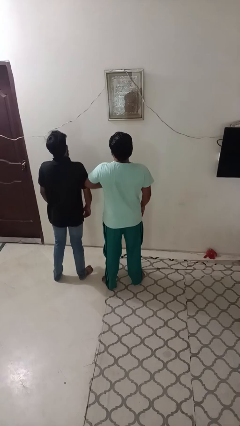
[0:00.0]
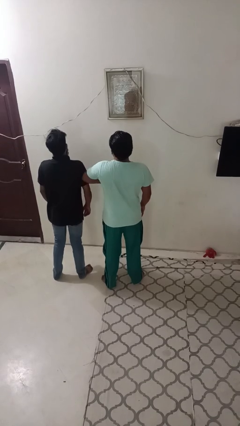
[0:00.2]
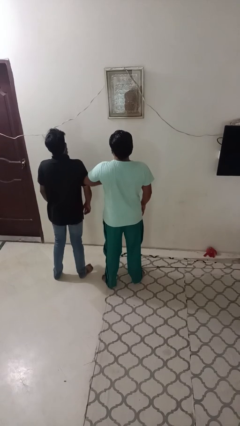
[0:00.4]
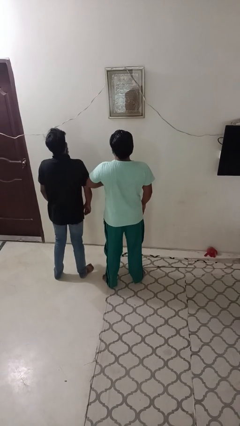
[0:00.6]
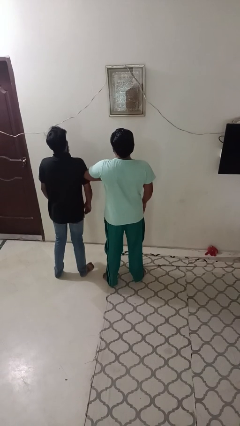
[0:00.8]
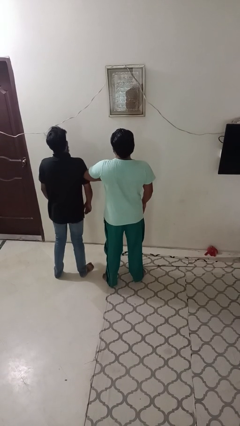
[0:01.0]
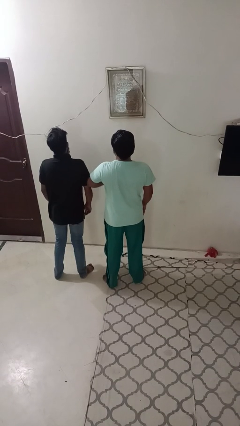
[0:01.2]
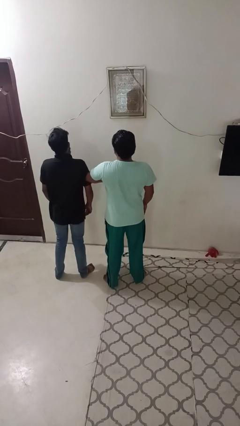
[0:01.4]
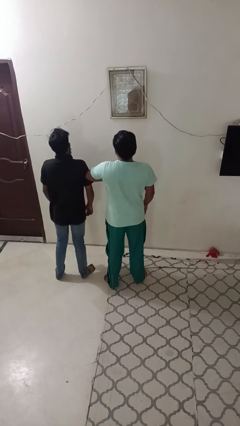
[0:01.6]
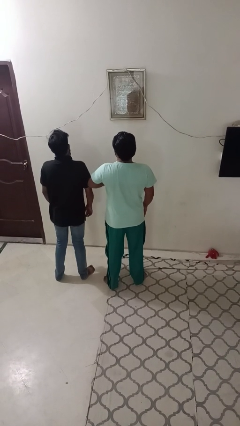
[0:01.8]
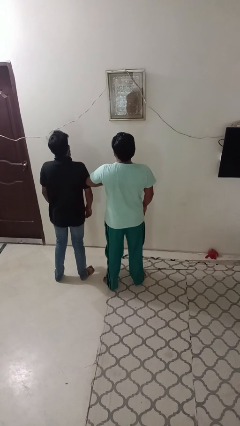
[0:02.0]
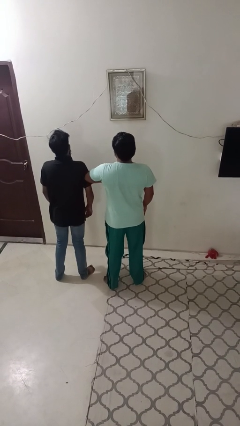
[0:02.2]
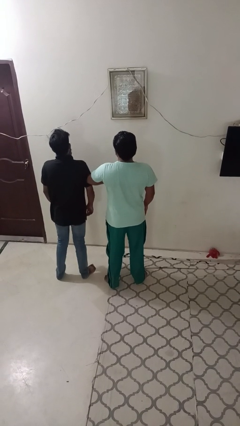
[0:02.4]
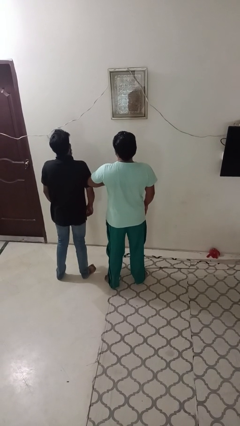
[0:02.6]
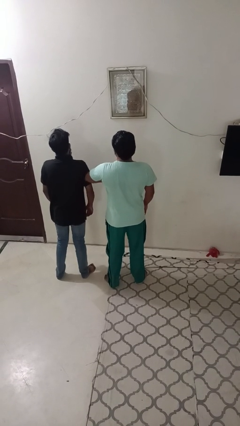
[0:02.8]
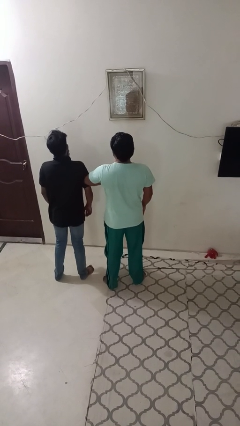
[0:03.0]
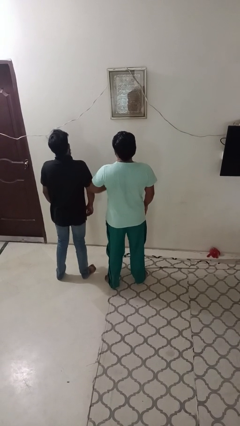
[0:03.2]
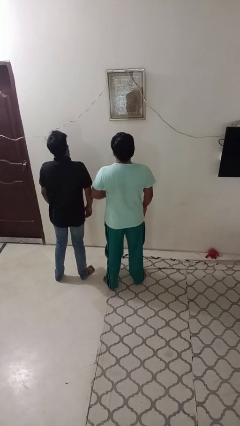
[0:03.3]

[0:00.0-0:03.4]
person nudges person with elbow

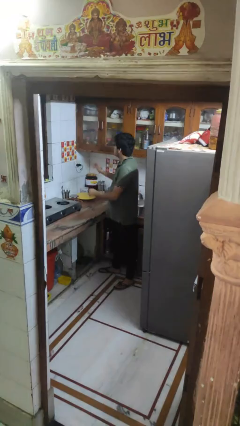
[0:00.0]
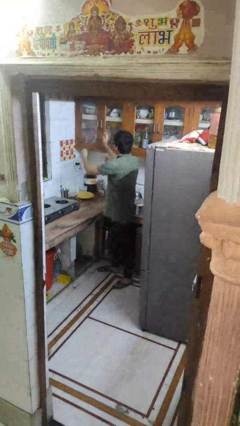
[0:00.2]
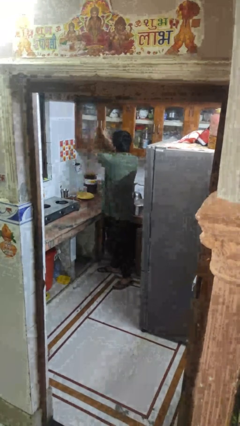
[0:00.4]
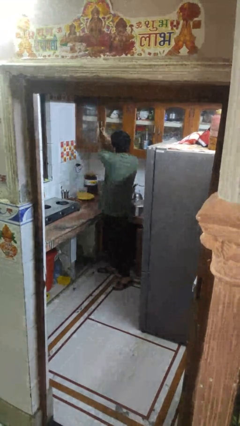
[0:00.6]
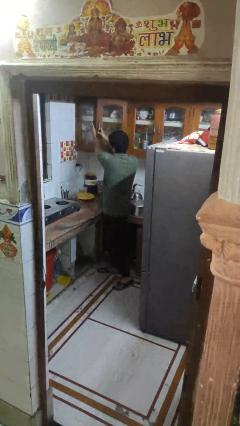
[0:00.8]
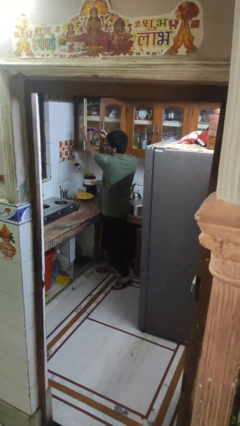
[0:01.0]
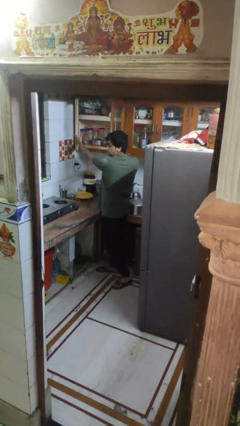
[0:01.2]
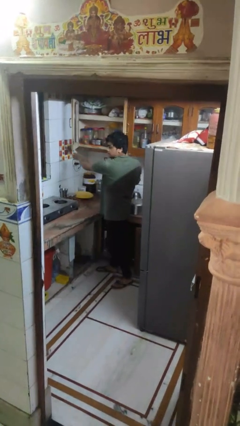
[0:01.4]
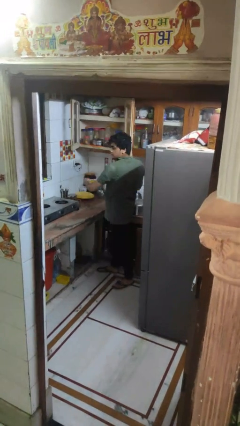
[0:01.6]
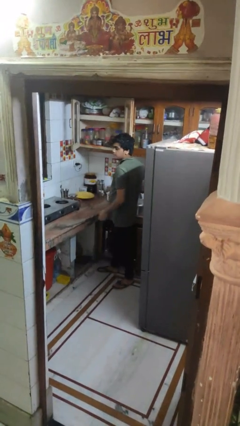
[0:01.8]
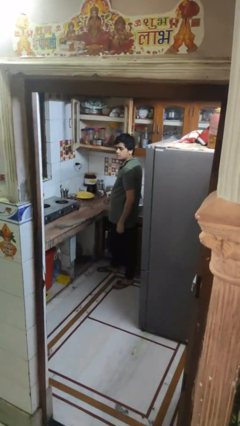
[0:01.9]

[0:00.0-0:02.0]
person opens cabinet

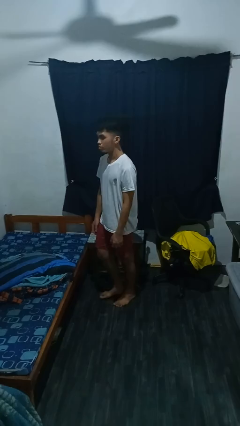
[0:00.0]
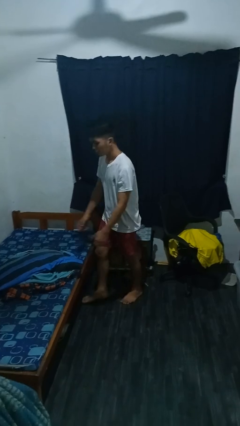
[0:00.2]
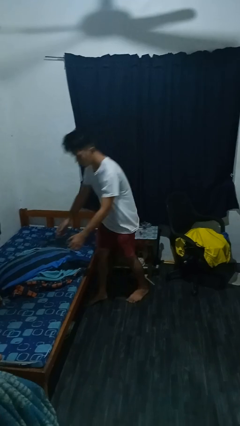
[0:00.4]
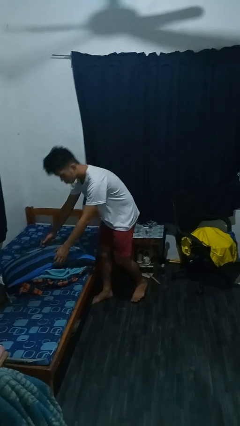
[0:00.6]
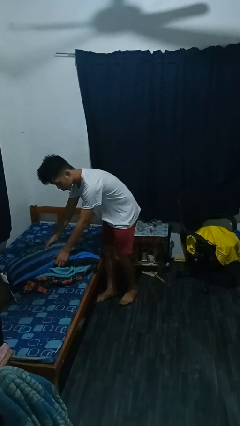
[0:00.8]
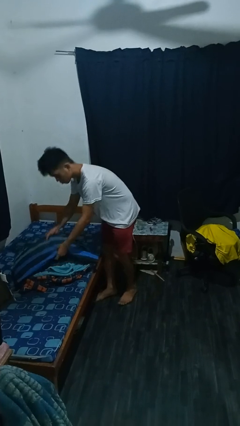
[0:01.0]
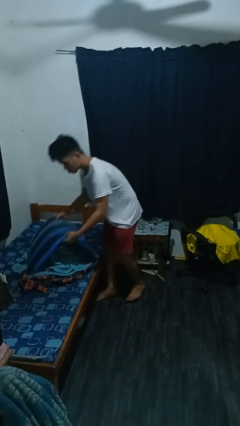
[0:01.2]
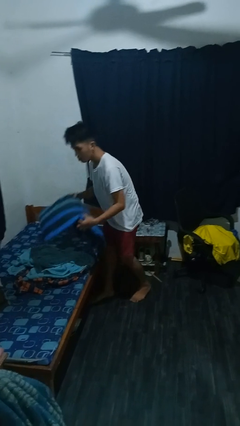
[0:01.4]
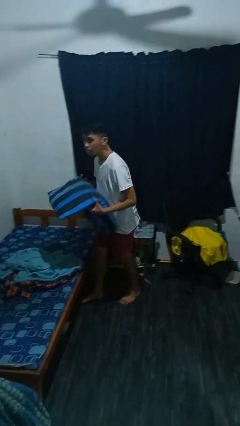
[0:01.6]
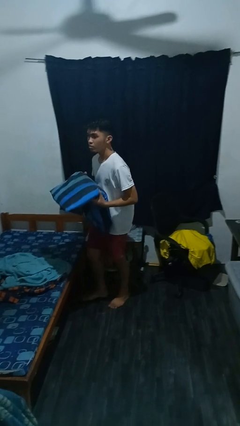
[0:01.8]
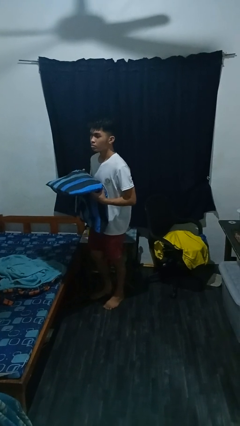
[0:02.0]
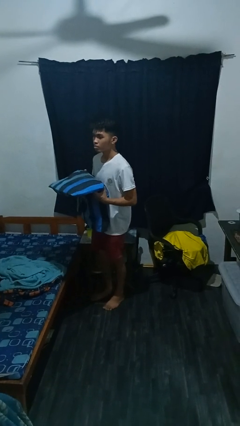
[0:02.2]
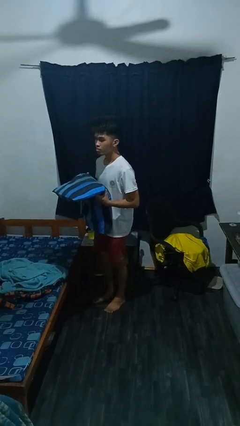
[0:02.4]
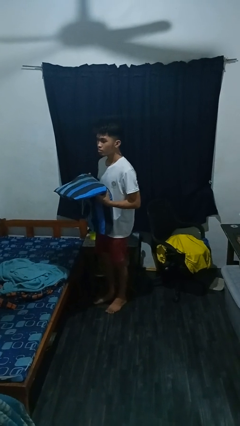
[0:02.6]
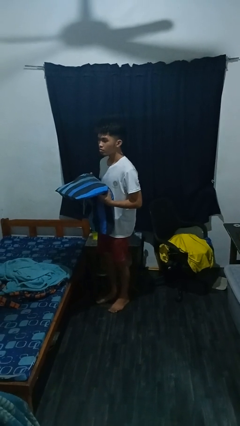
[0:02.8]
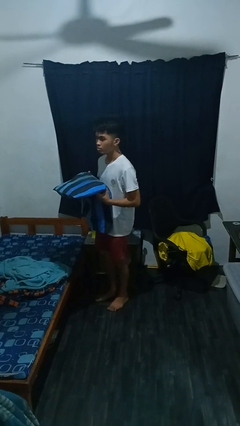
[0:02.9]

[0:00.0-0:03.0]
person picks up object from bed

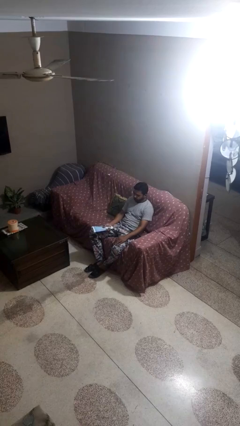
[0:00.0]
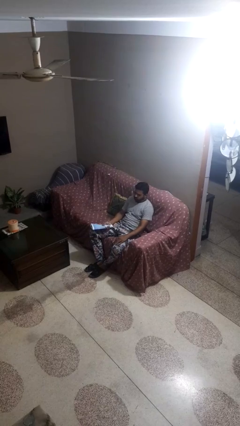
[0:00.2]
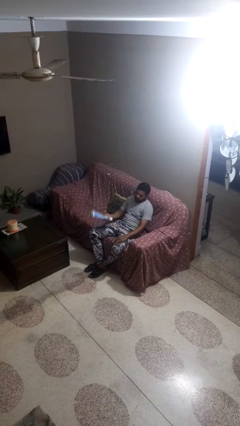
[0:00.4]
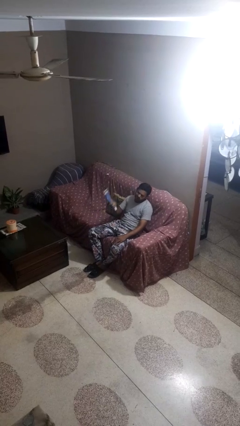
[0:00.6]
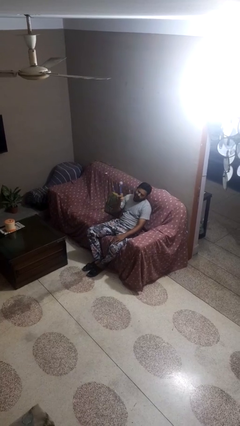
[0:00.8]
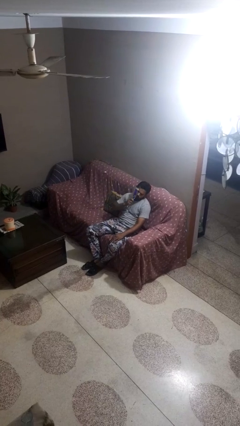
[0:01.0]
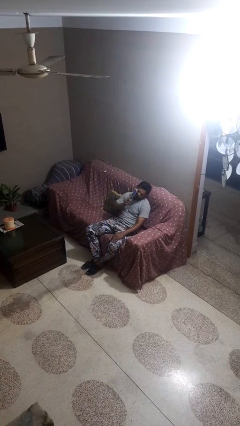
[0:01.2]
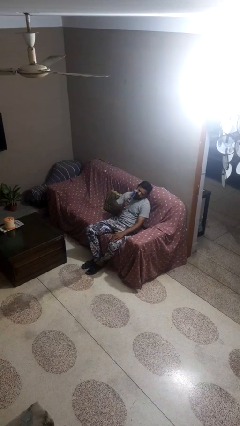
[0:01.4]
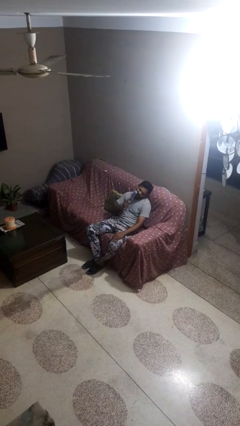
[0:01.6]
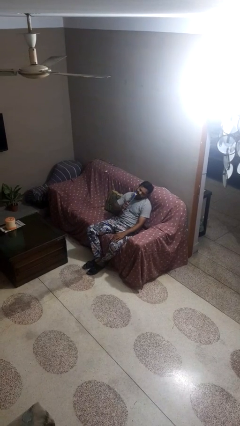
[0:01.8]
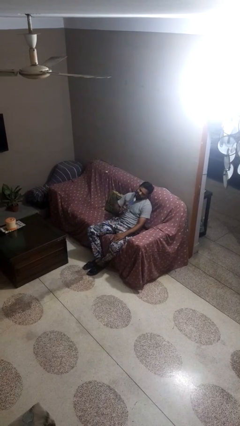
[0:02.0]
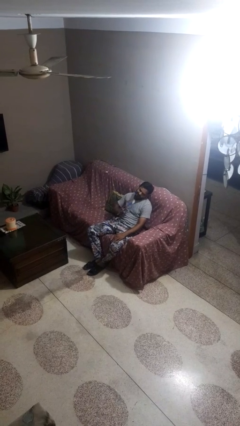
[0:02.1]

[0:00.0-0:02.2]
person swats bug

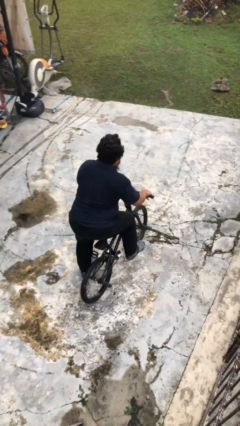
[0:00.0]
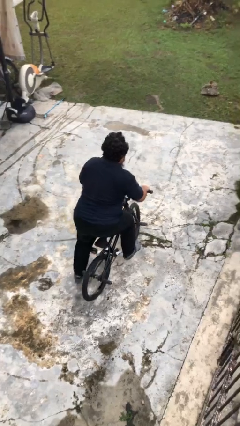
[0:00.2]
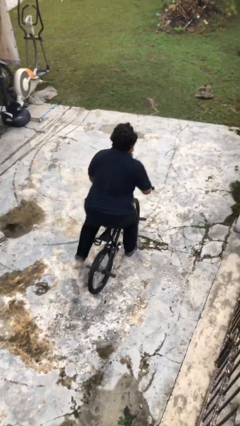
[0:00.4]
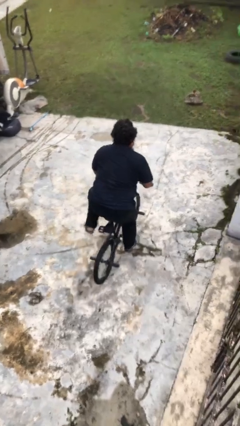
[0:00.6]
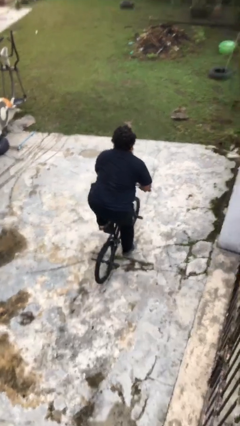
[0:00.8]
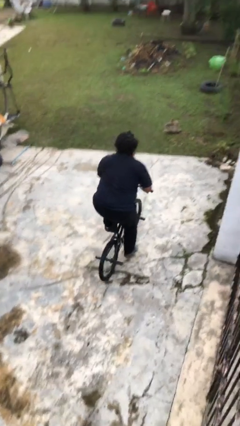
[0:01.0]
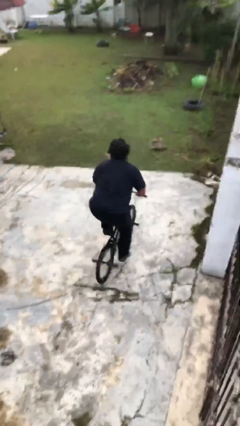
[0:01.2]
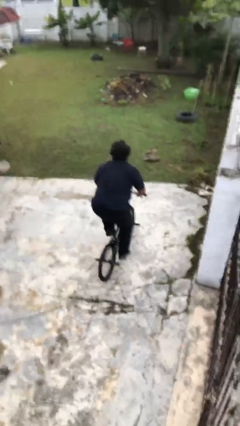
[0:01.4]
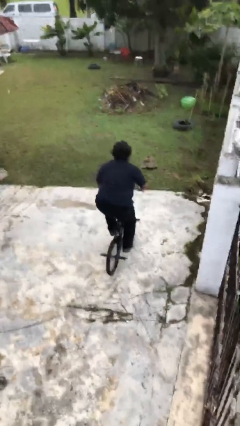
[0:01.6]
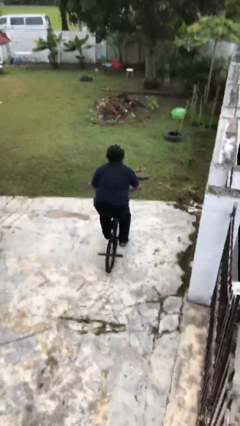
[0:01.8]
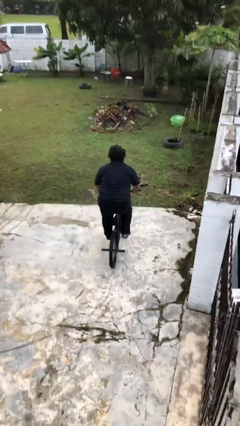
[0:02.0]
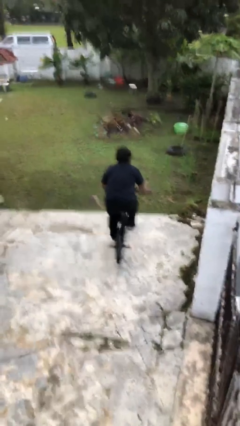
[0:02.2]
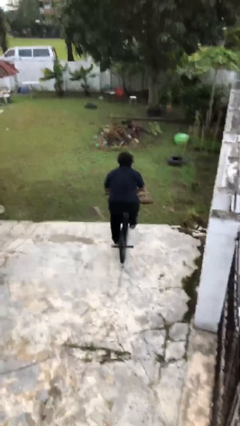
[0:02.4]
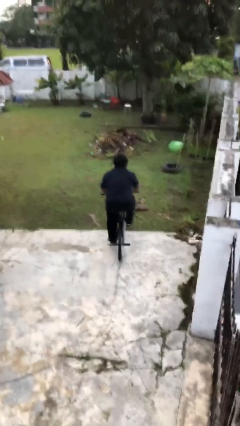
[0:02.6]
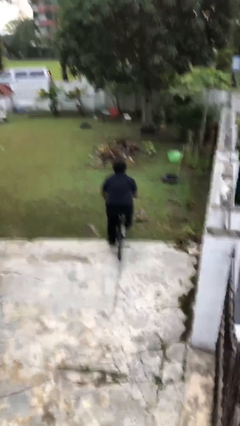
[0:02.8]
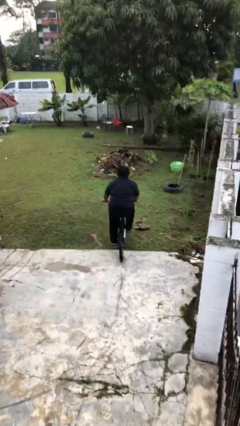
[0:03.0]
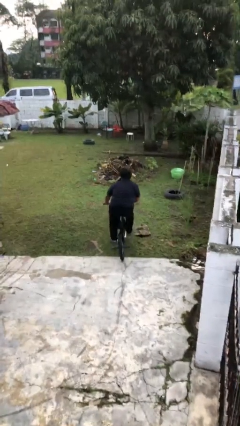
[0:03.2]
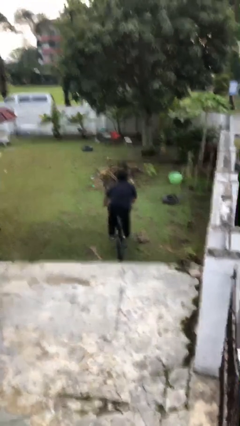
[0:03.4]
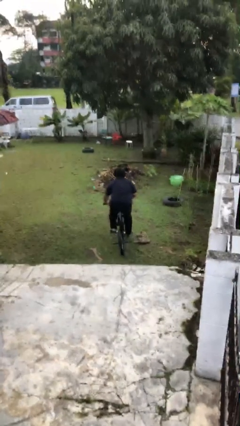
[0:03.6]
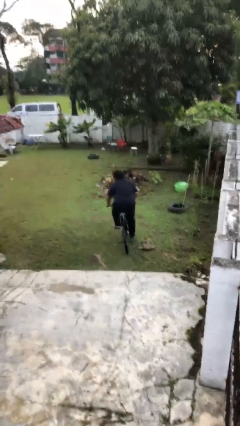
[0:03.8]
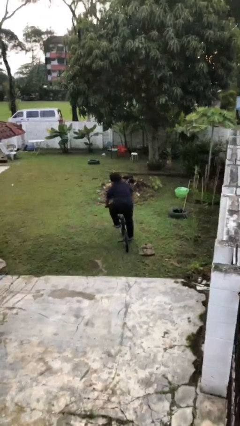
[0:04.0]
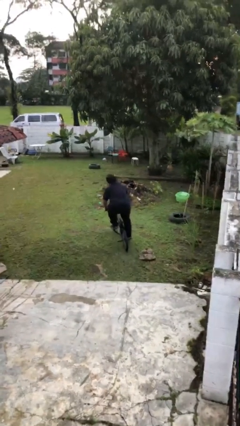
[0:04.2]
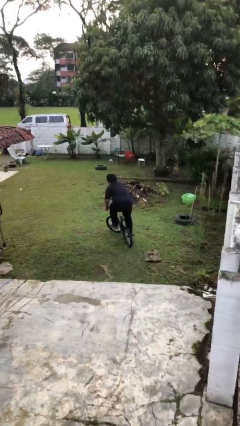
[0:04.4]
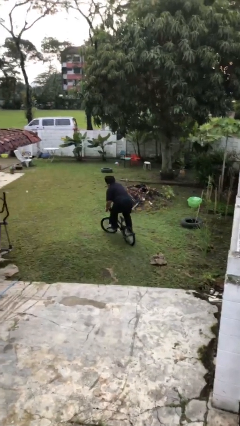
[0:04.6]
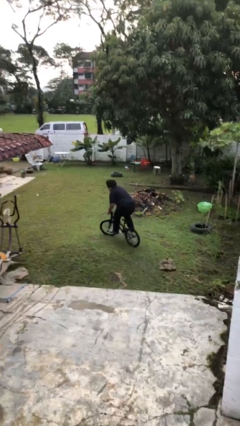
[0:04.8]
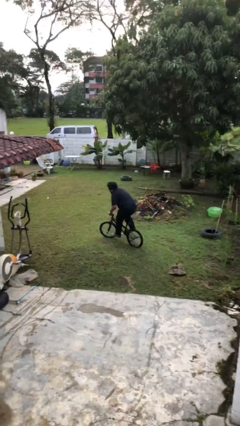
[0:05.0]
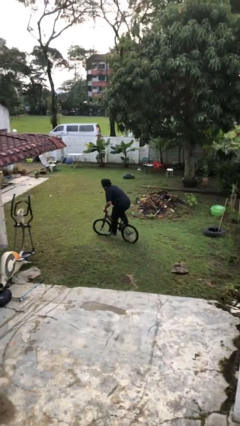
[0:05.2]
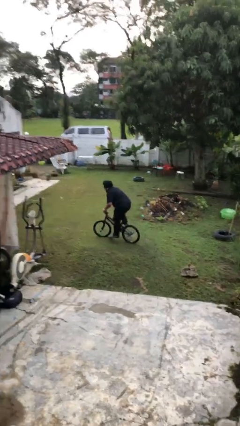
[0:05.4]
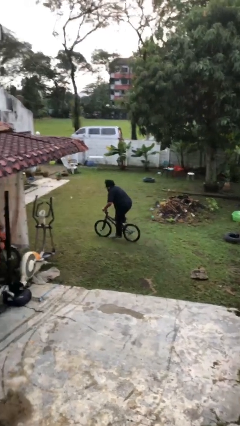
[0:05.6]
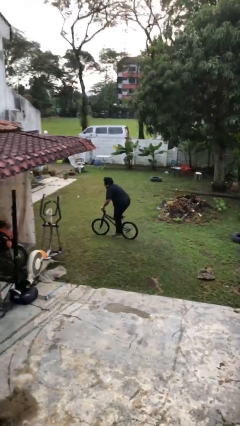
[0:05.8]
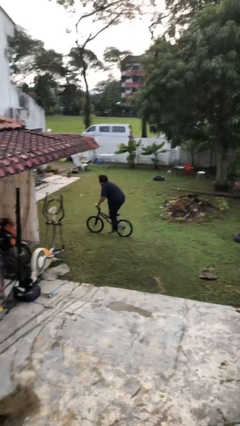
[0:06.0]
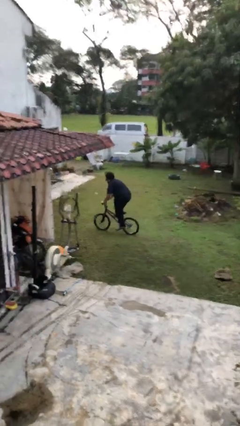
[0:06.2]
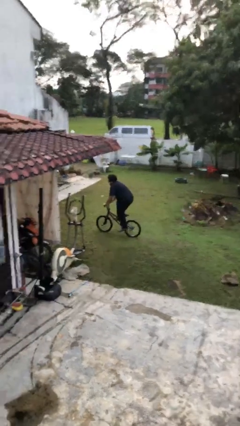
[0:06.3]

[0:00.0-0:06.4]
person rides bicycle

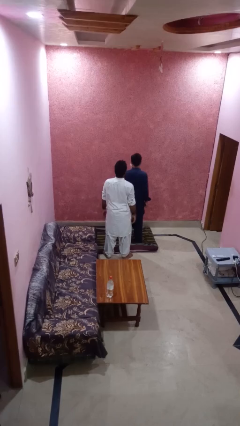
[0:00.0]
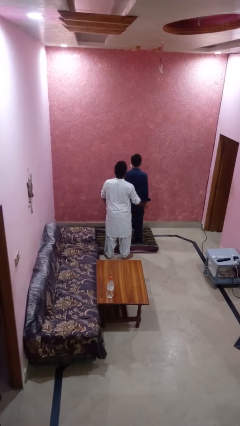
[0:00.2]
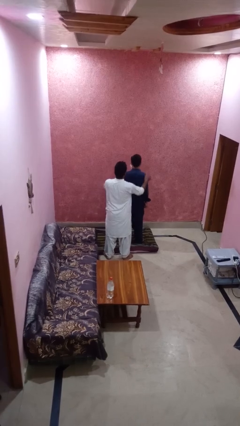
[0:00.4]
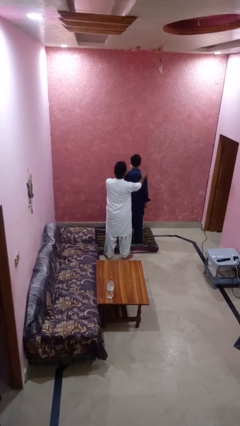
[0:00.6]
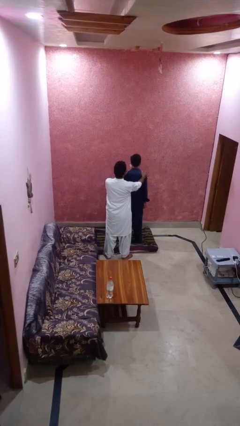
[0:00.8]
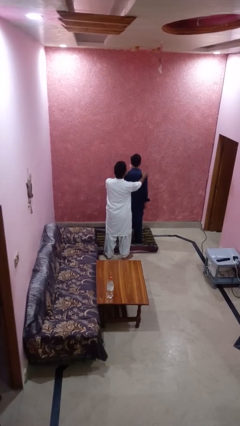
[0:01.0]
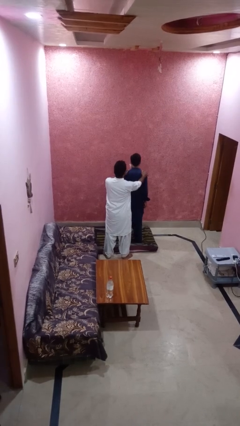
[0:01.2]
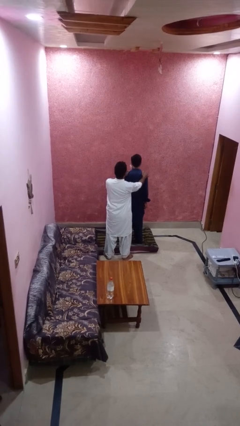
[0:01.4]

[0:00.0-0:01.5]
person grabs person by shoulder
